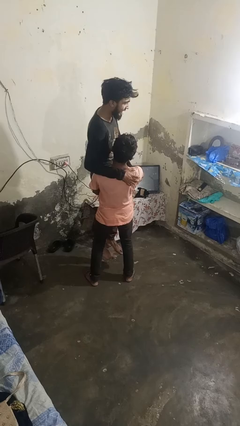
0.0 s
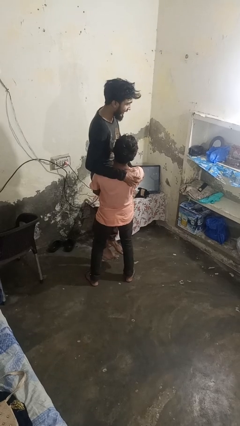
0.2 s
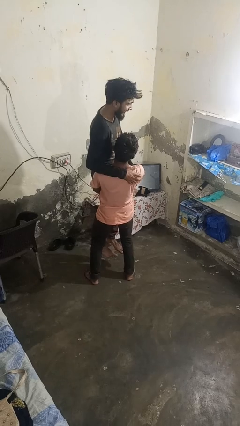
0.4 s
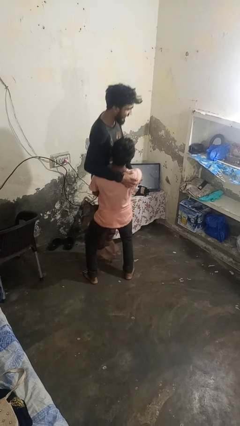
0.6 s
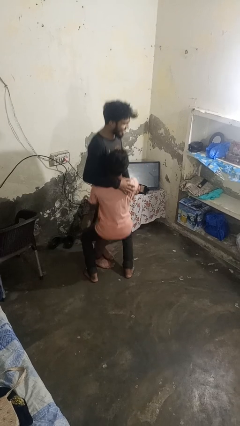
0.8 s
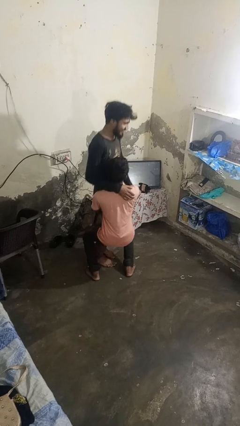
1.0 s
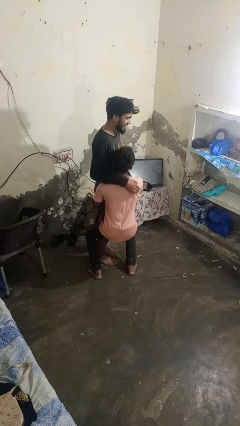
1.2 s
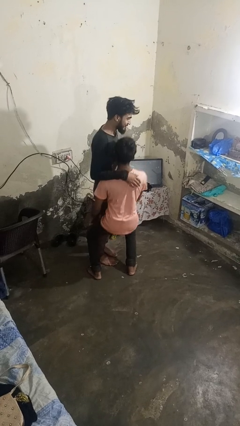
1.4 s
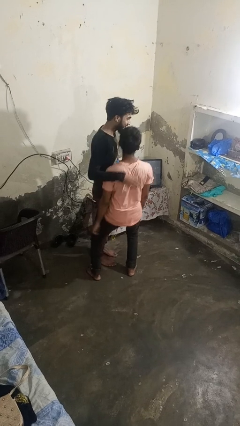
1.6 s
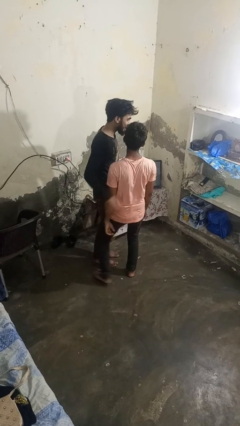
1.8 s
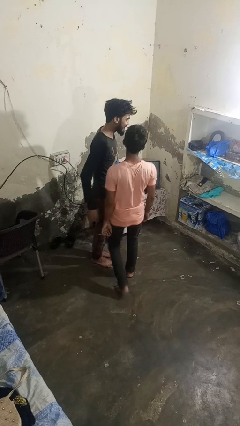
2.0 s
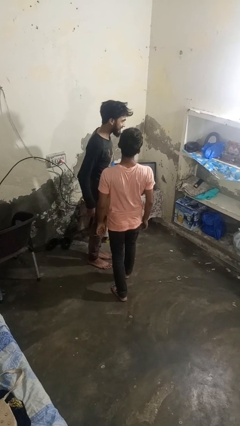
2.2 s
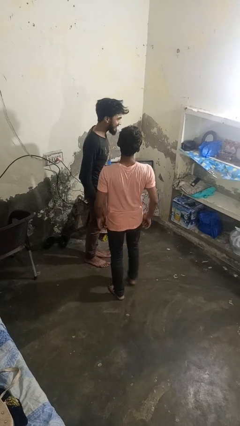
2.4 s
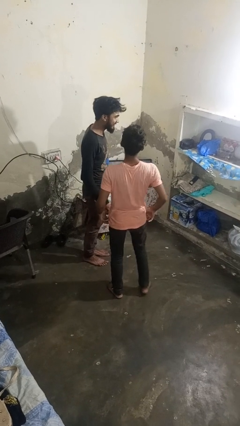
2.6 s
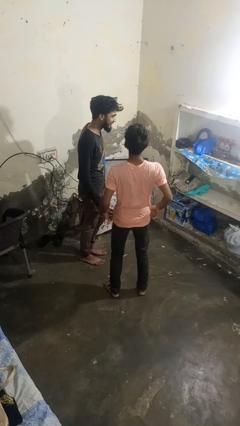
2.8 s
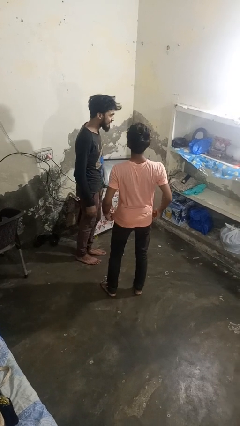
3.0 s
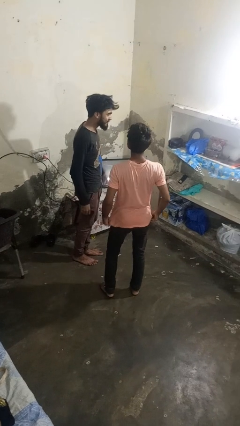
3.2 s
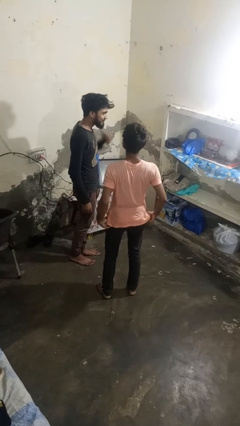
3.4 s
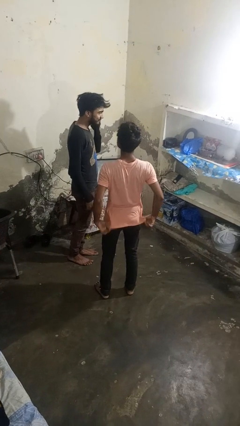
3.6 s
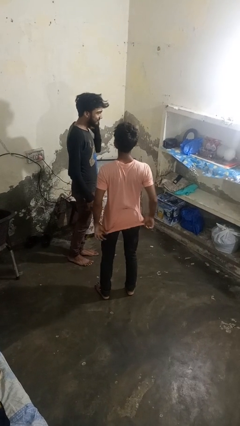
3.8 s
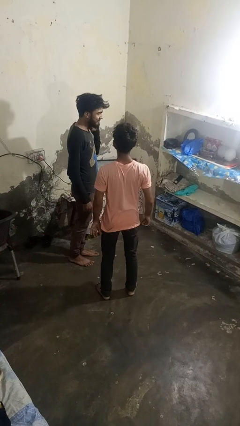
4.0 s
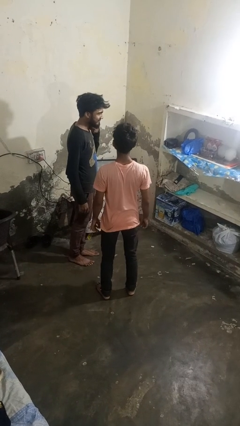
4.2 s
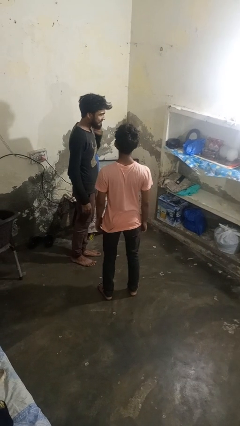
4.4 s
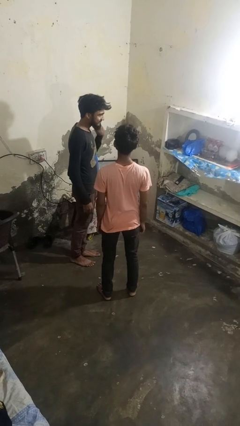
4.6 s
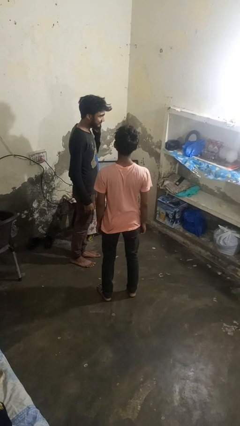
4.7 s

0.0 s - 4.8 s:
person puts down person

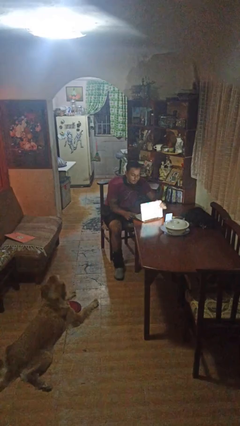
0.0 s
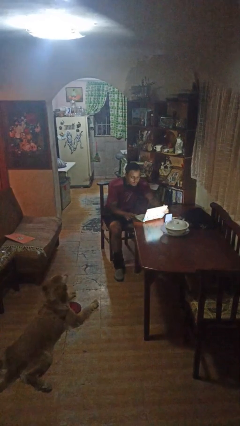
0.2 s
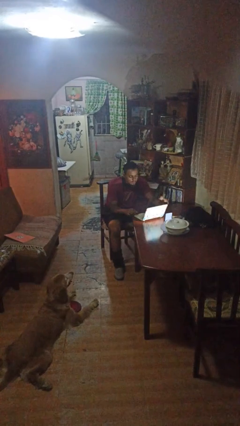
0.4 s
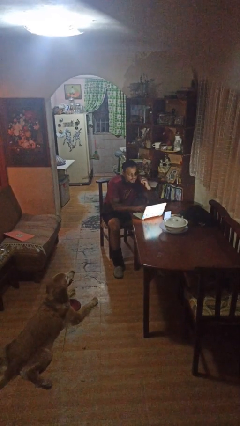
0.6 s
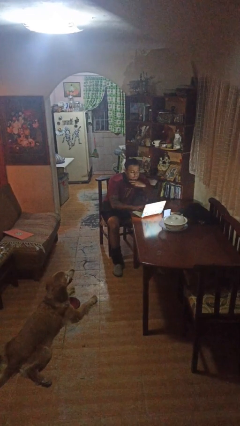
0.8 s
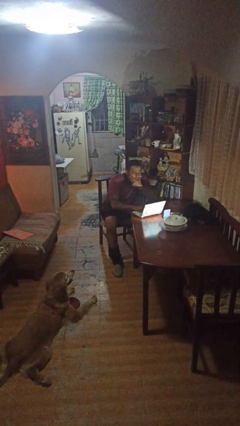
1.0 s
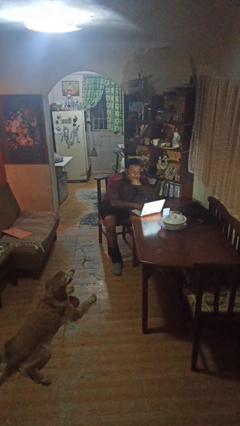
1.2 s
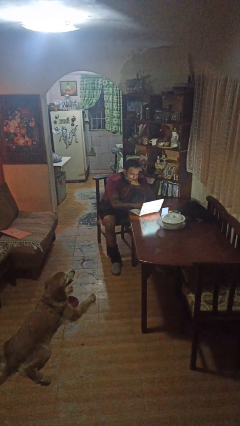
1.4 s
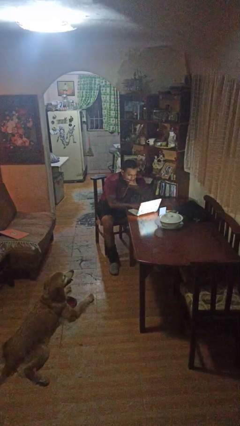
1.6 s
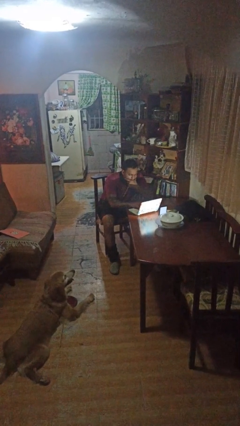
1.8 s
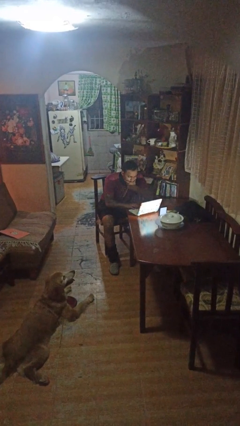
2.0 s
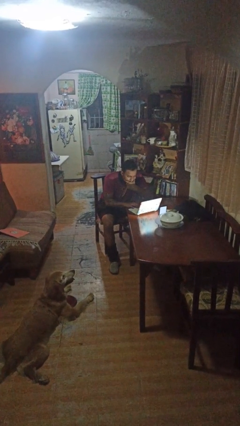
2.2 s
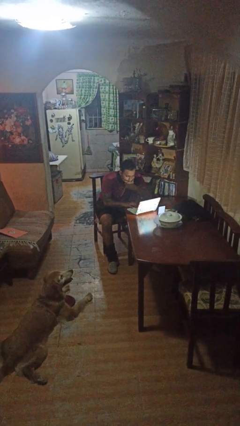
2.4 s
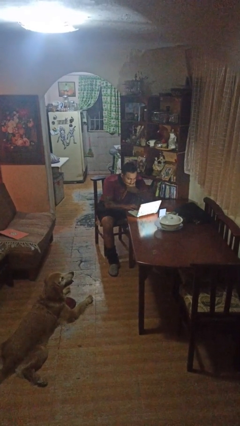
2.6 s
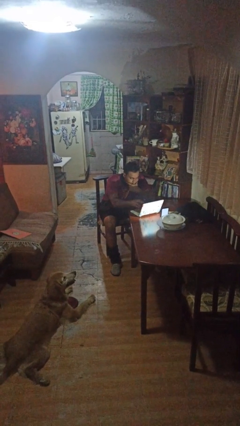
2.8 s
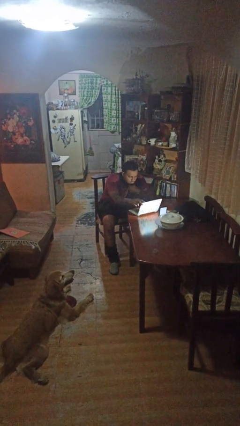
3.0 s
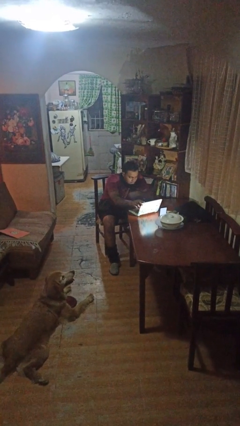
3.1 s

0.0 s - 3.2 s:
person interacts with laptop

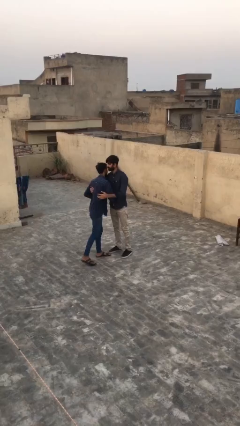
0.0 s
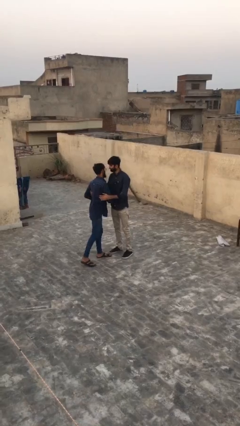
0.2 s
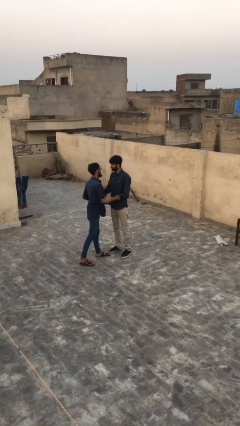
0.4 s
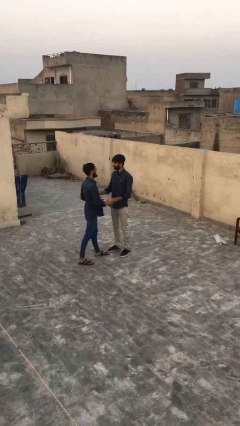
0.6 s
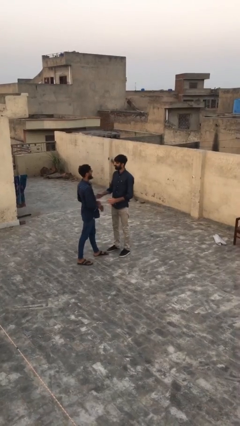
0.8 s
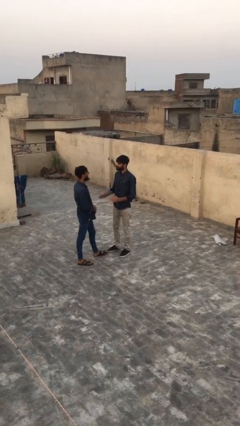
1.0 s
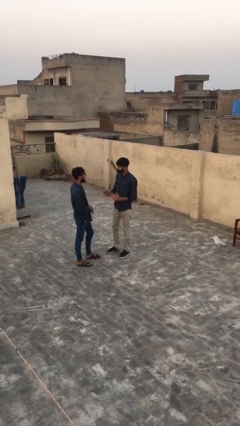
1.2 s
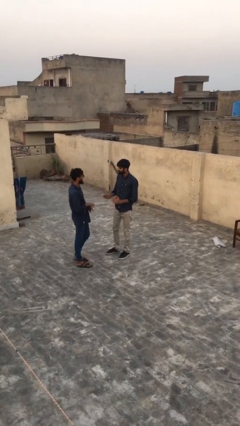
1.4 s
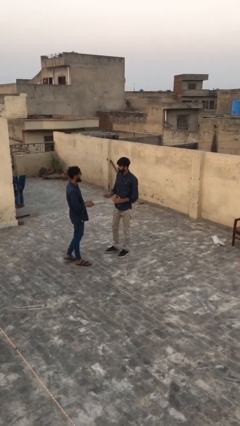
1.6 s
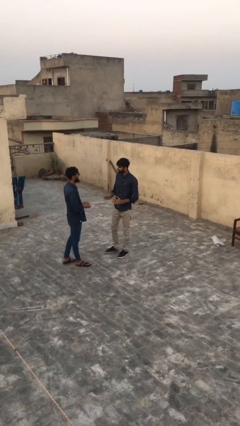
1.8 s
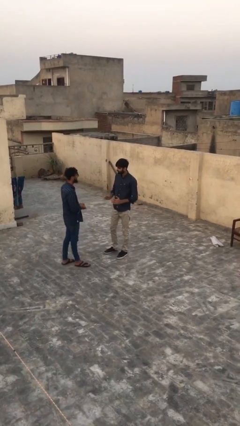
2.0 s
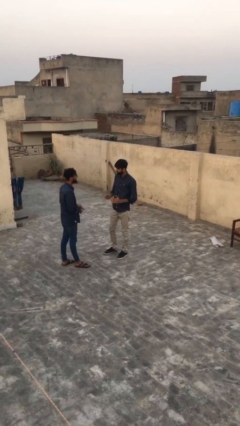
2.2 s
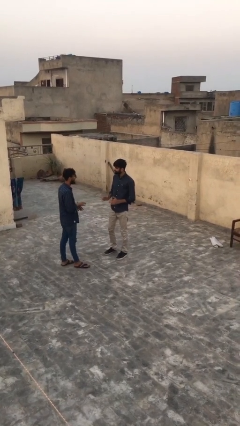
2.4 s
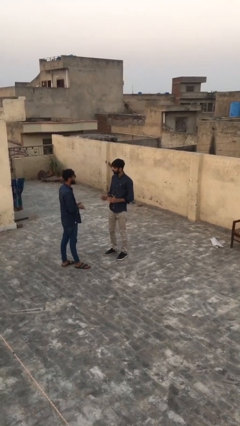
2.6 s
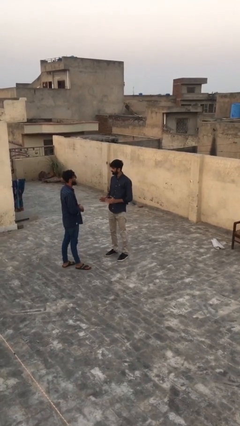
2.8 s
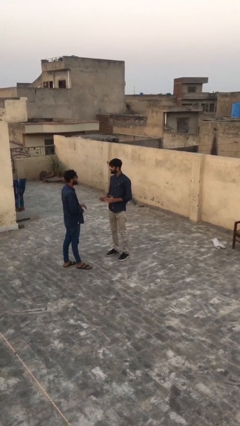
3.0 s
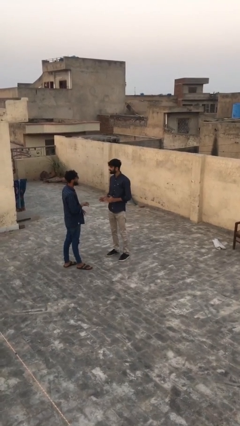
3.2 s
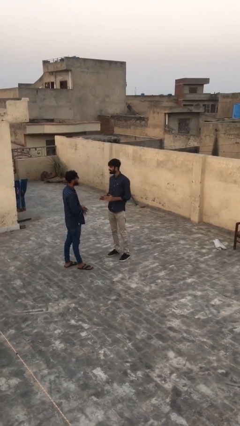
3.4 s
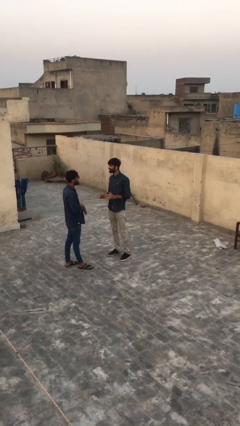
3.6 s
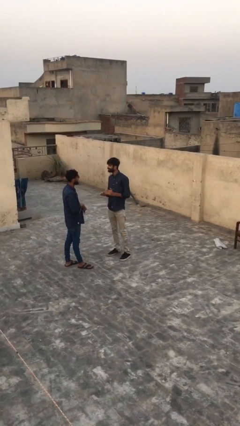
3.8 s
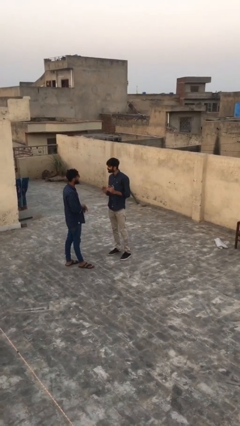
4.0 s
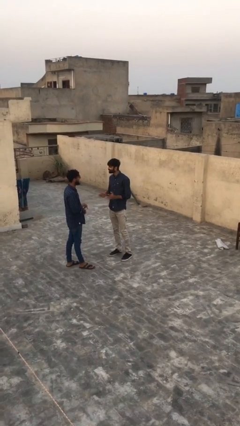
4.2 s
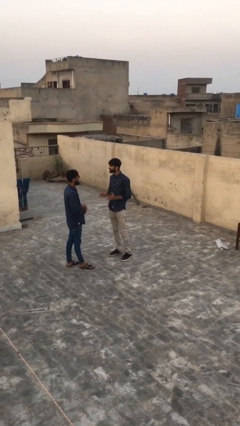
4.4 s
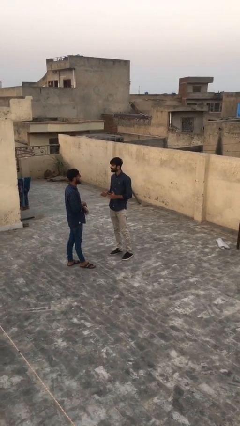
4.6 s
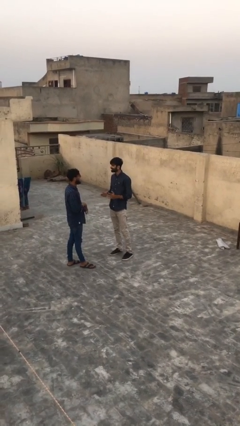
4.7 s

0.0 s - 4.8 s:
person talks to person

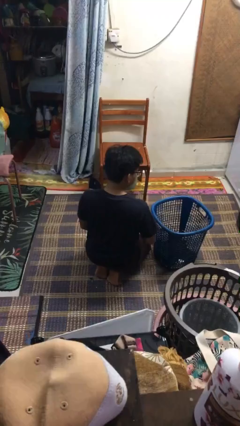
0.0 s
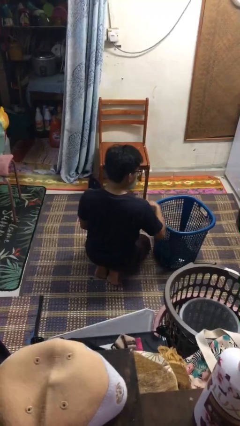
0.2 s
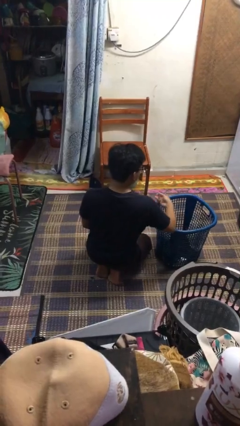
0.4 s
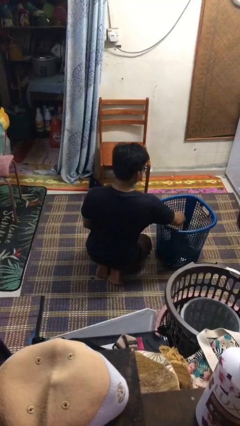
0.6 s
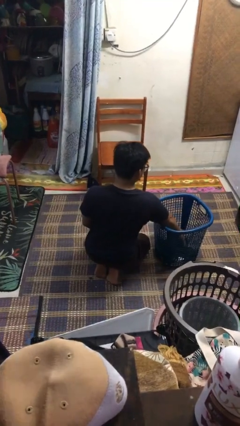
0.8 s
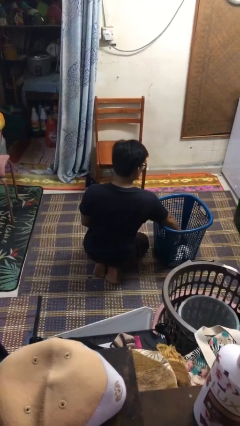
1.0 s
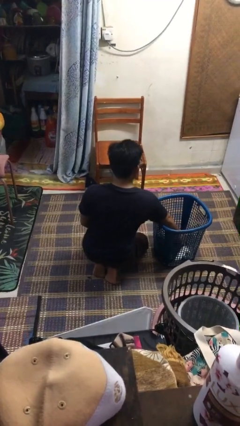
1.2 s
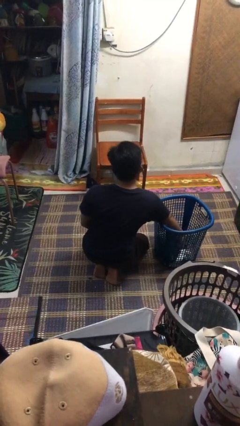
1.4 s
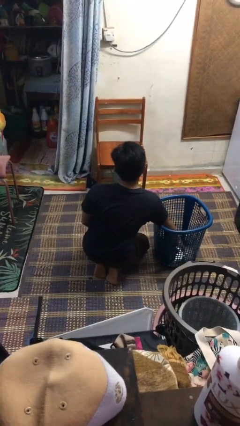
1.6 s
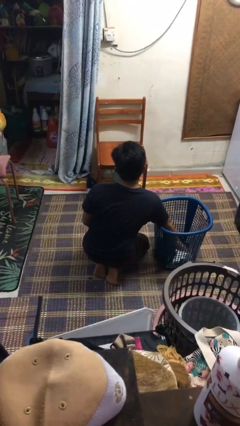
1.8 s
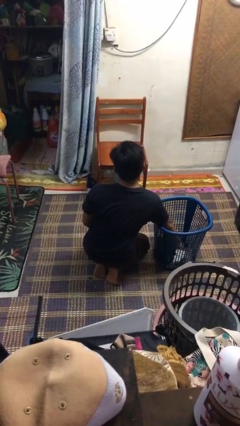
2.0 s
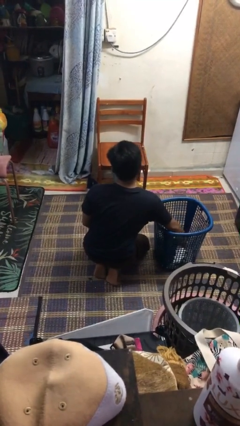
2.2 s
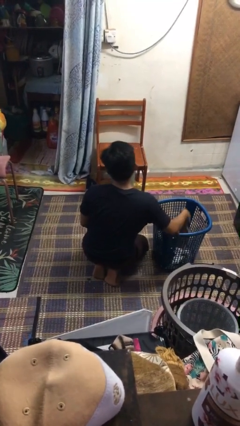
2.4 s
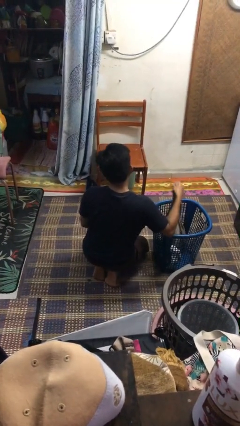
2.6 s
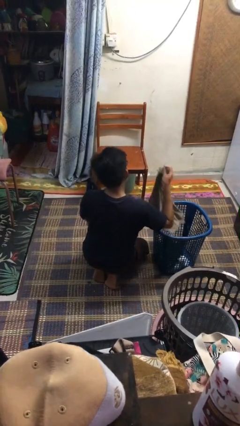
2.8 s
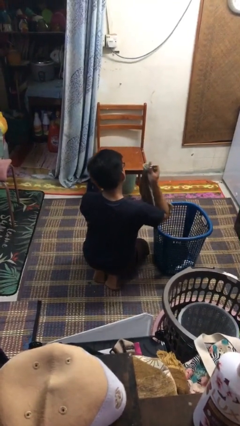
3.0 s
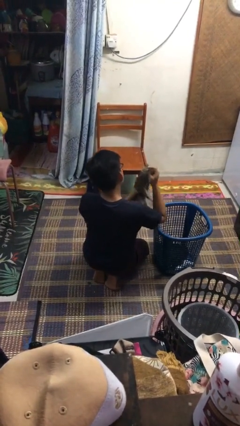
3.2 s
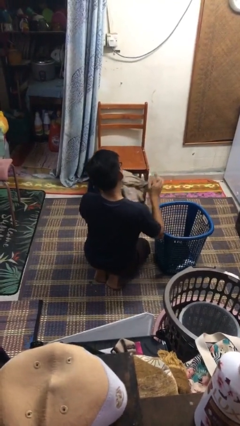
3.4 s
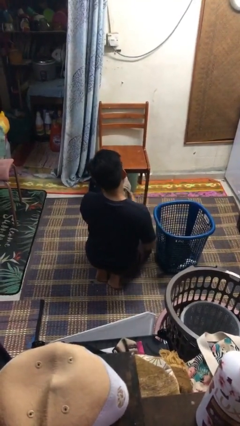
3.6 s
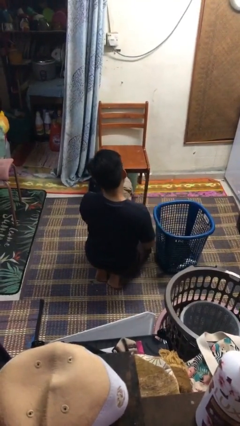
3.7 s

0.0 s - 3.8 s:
person takes object from basket

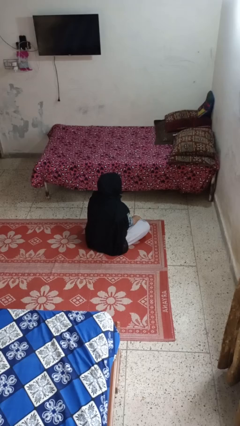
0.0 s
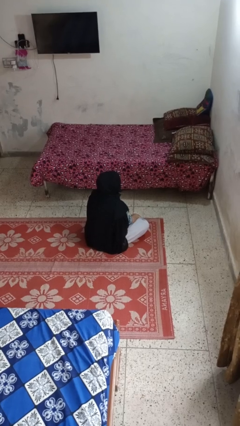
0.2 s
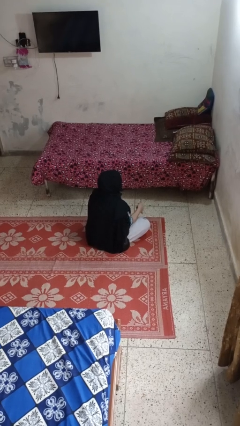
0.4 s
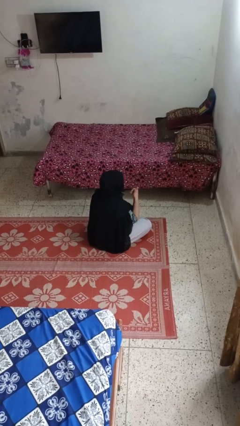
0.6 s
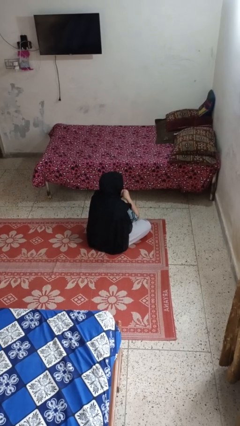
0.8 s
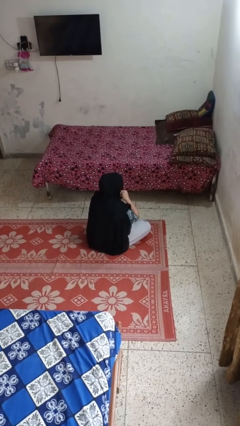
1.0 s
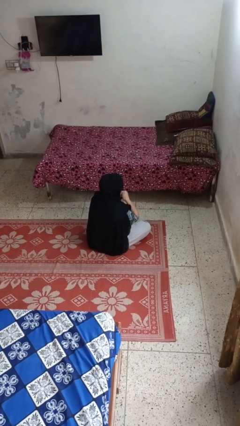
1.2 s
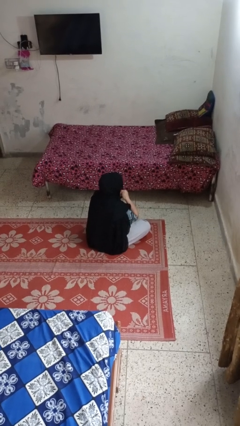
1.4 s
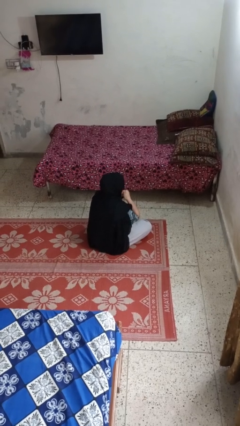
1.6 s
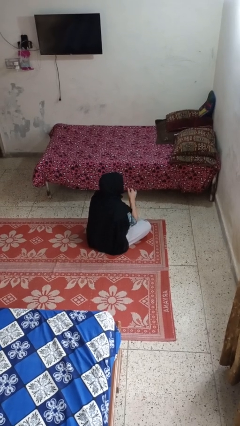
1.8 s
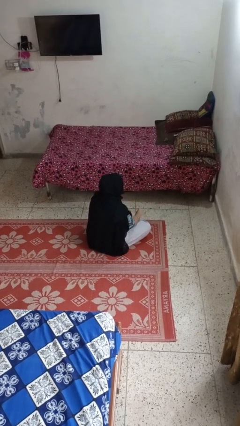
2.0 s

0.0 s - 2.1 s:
person gestures call me
